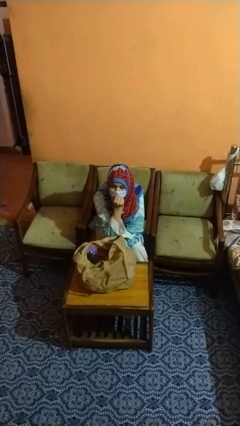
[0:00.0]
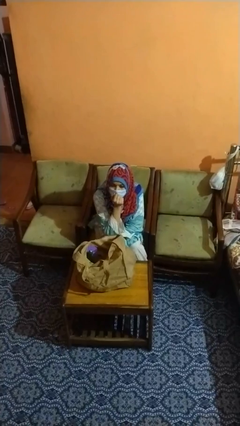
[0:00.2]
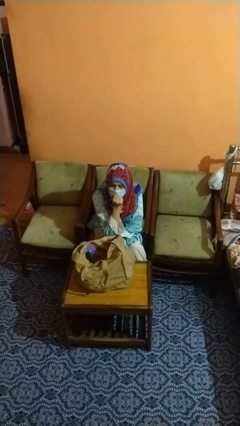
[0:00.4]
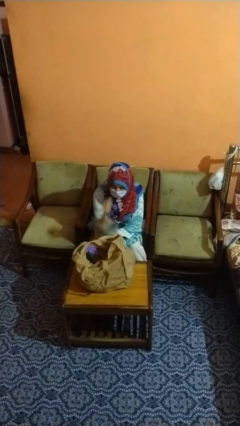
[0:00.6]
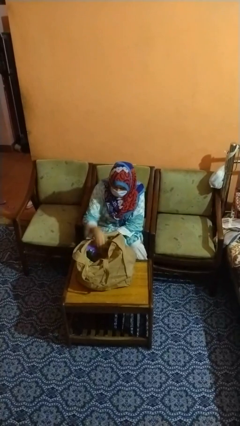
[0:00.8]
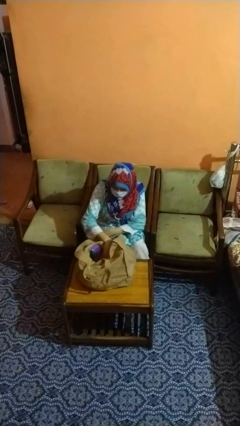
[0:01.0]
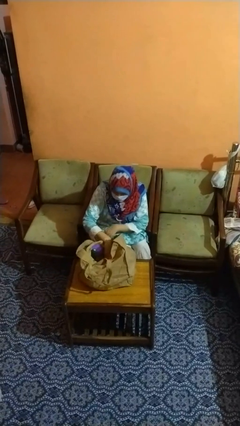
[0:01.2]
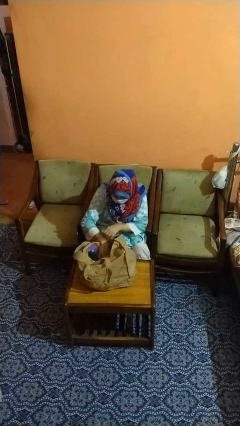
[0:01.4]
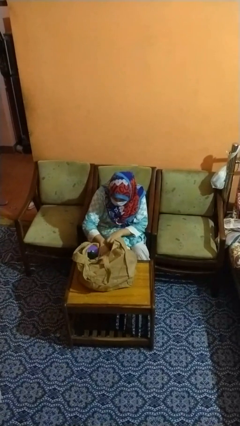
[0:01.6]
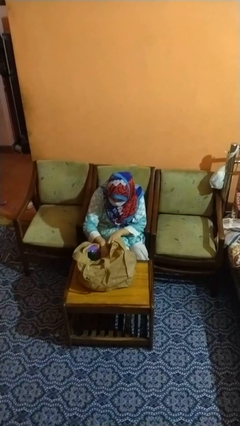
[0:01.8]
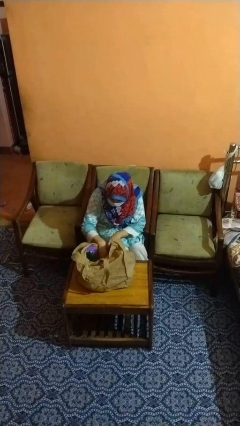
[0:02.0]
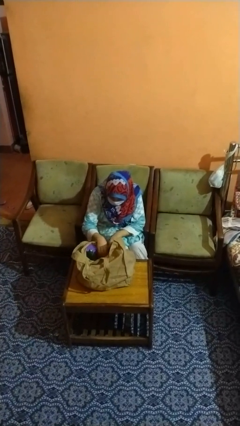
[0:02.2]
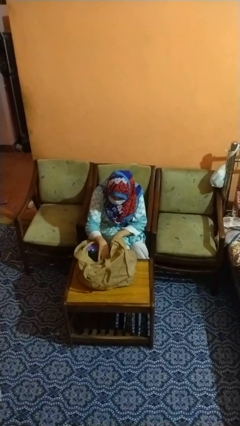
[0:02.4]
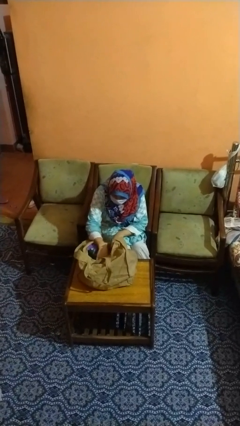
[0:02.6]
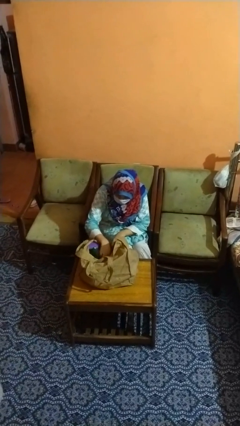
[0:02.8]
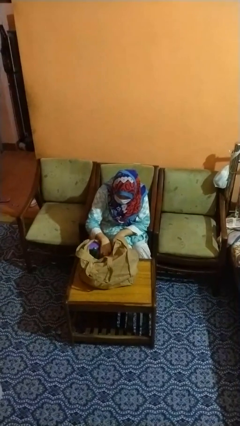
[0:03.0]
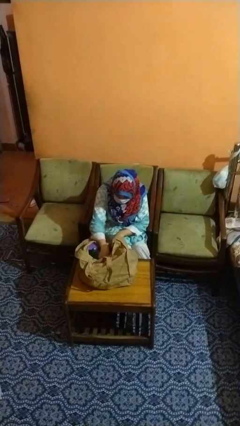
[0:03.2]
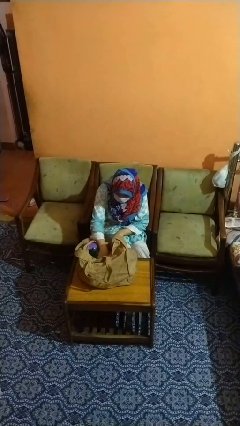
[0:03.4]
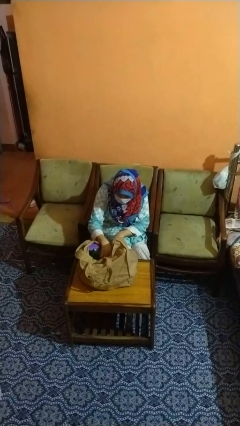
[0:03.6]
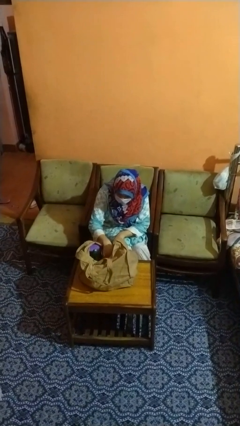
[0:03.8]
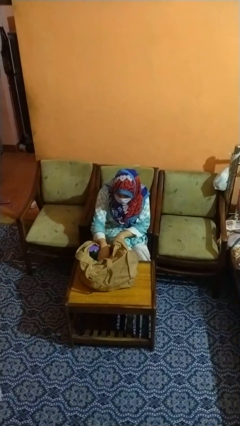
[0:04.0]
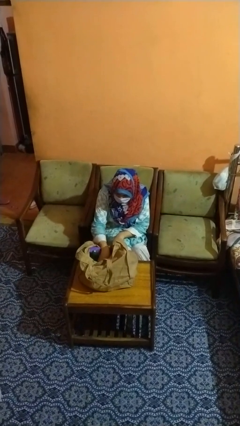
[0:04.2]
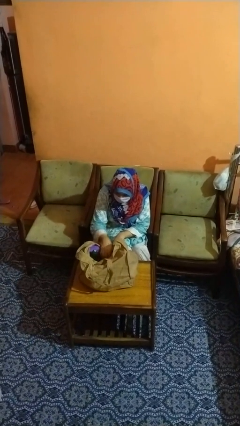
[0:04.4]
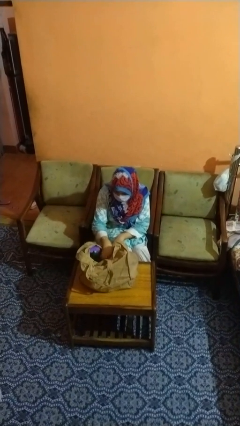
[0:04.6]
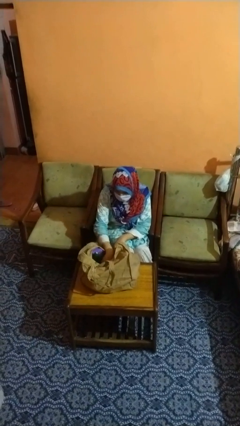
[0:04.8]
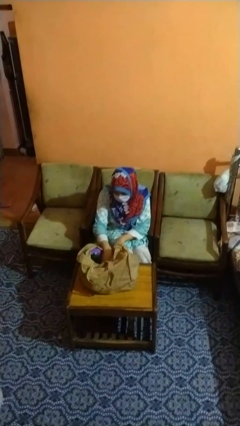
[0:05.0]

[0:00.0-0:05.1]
person searches in bag

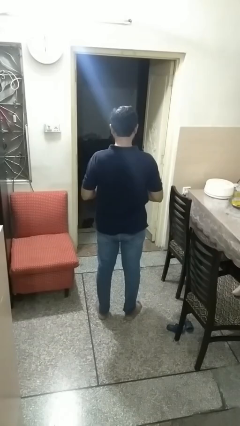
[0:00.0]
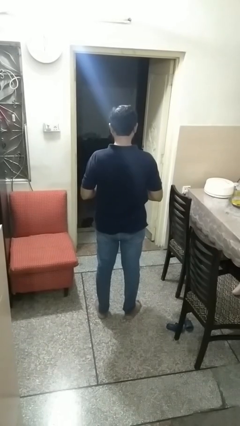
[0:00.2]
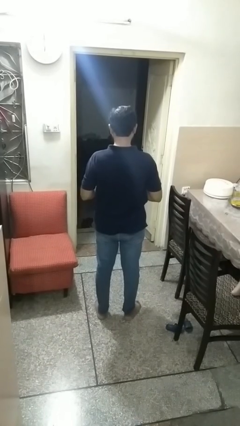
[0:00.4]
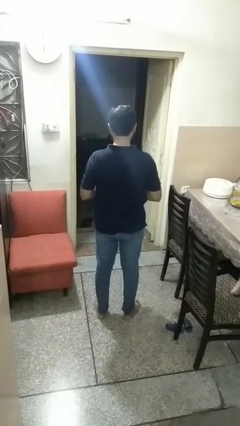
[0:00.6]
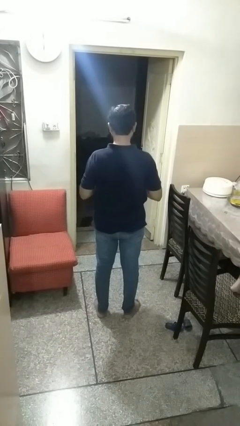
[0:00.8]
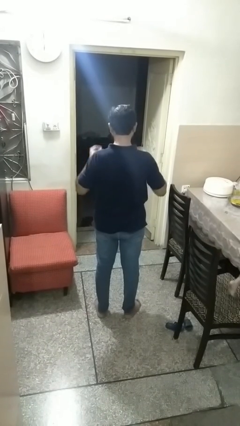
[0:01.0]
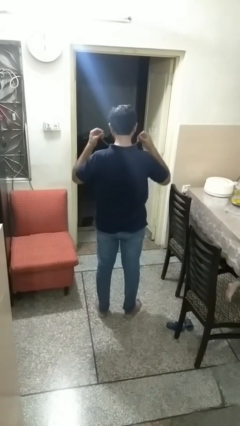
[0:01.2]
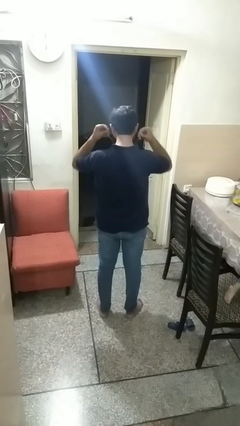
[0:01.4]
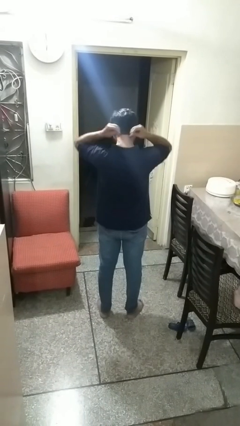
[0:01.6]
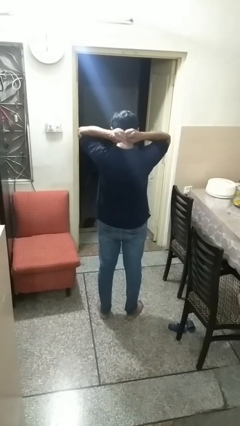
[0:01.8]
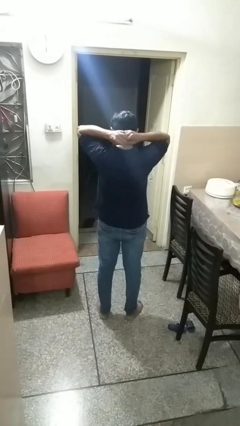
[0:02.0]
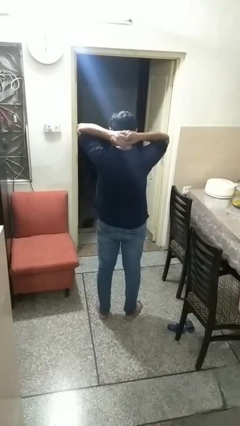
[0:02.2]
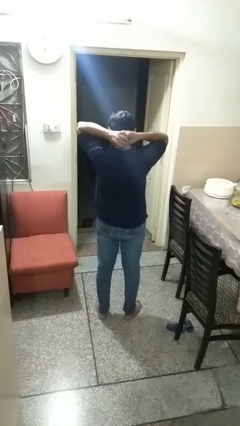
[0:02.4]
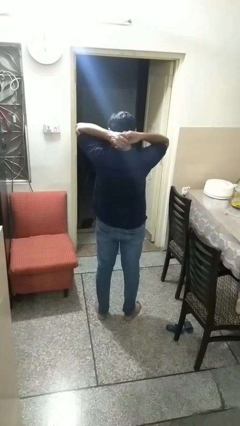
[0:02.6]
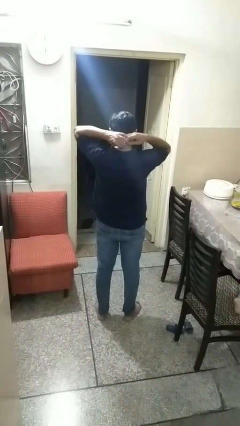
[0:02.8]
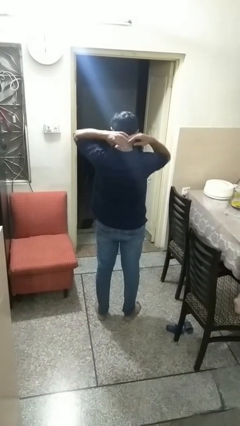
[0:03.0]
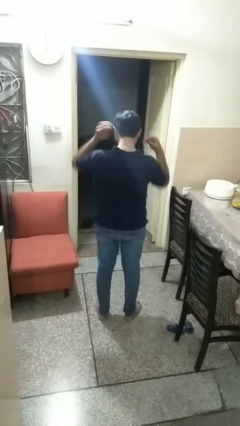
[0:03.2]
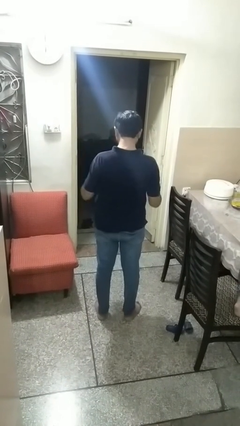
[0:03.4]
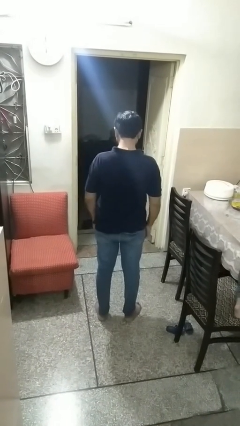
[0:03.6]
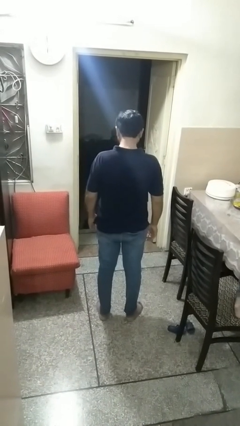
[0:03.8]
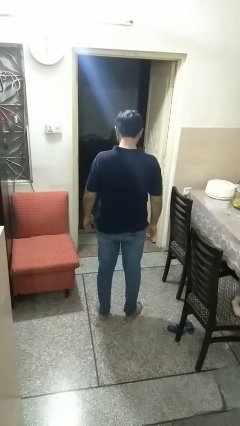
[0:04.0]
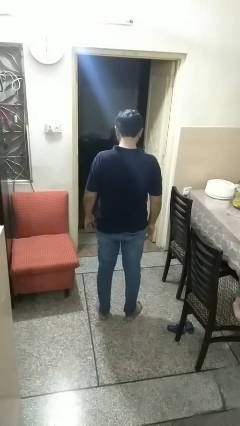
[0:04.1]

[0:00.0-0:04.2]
person puts on necklace

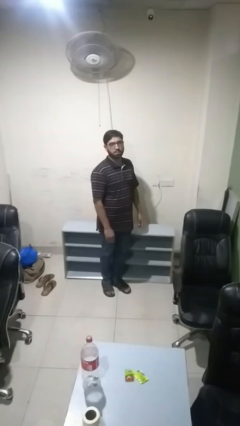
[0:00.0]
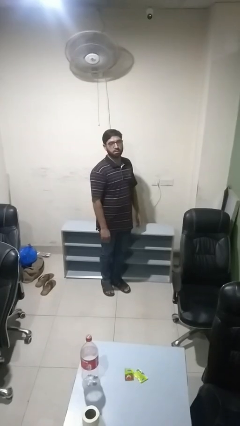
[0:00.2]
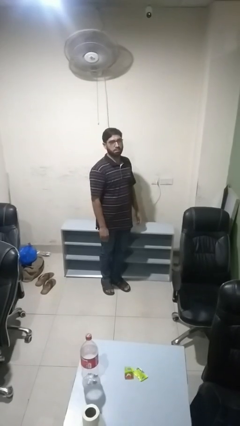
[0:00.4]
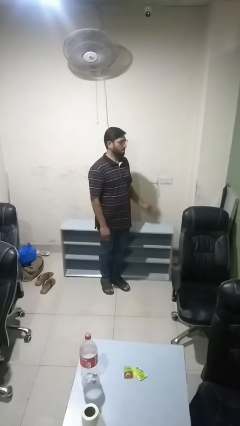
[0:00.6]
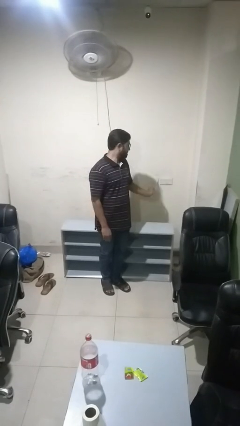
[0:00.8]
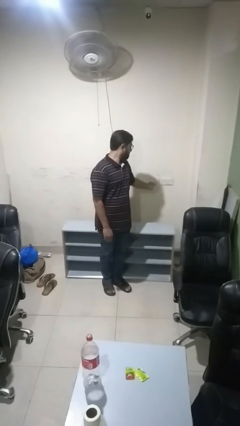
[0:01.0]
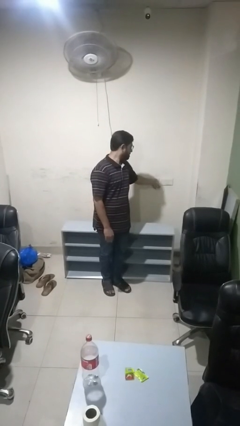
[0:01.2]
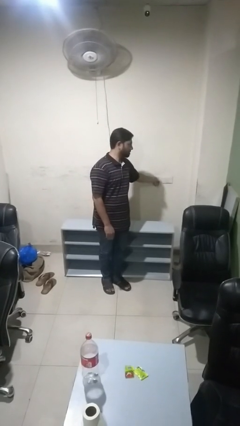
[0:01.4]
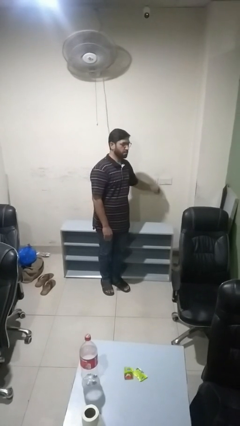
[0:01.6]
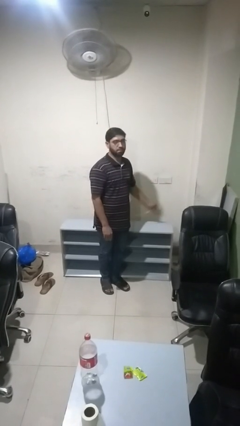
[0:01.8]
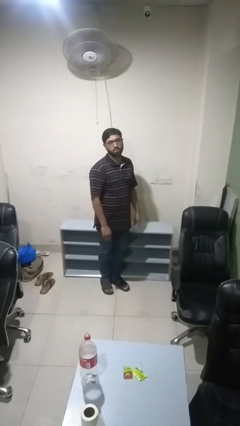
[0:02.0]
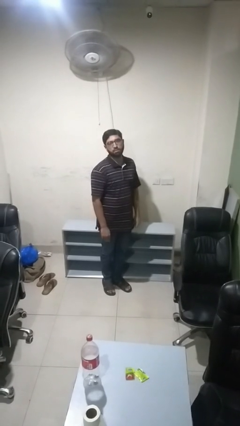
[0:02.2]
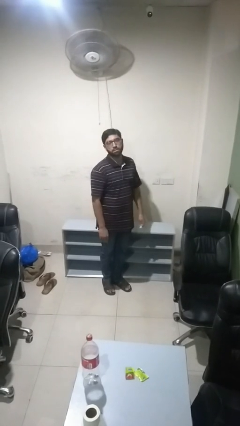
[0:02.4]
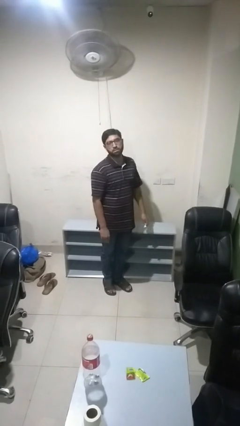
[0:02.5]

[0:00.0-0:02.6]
person unplugs from electrical socket

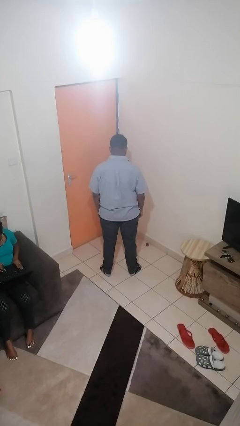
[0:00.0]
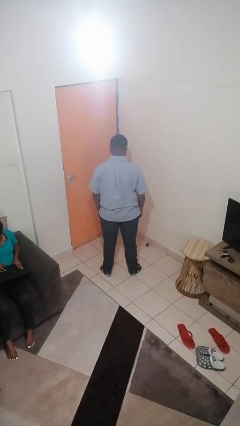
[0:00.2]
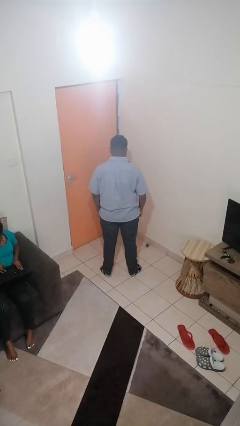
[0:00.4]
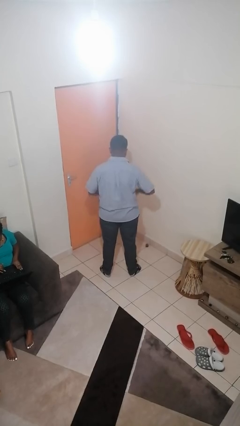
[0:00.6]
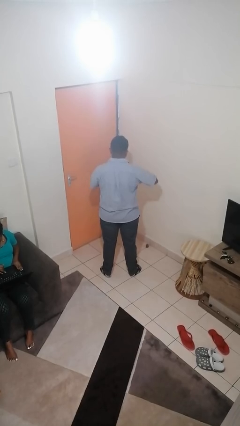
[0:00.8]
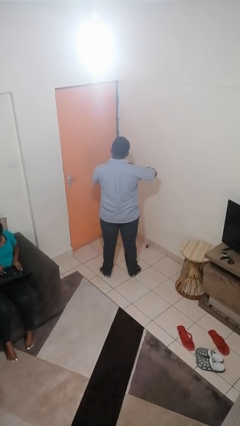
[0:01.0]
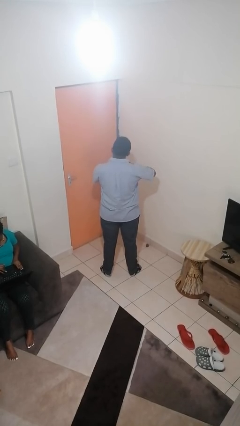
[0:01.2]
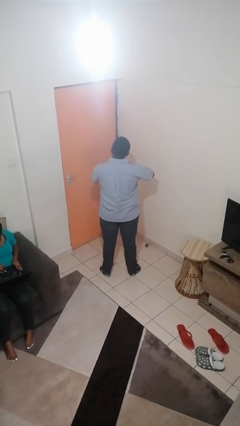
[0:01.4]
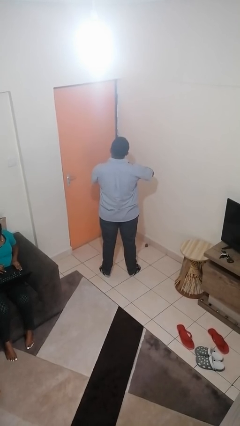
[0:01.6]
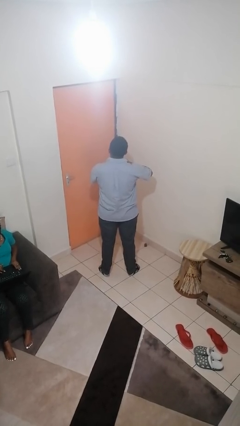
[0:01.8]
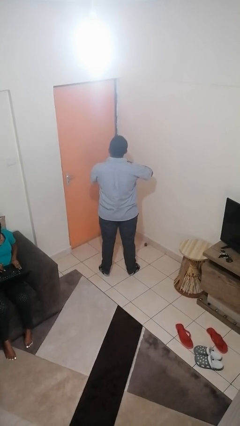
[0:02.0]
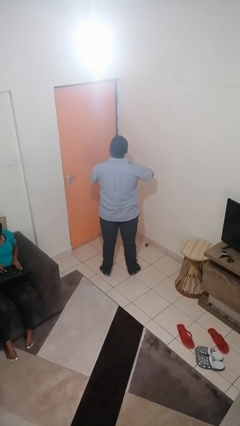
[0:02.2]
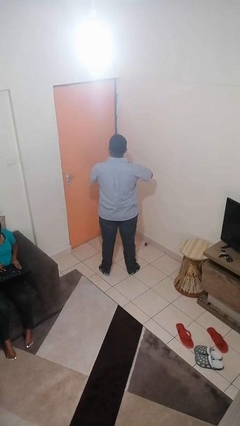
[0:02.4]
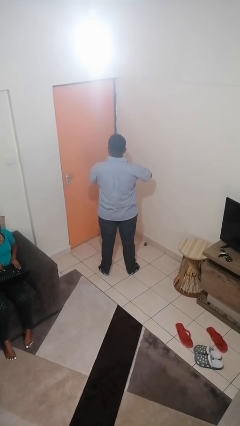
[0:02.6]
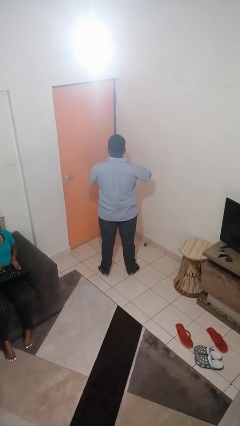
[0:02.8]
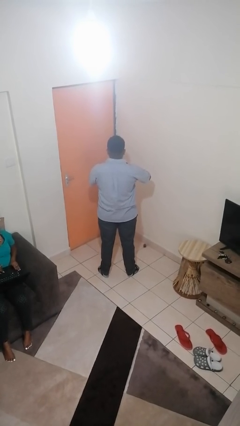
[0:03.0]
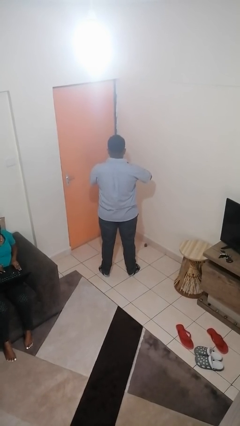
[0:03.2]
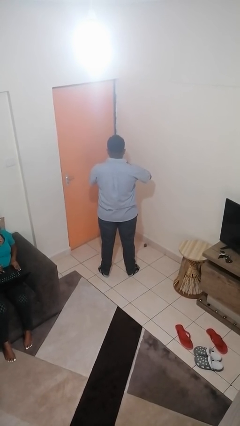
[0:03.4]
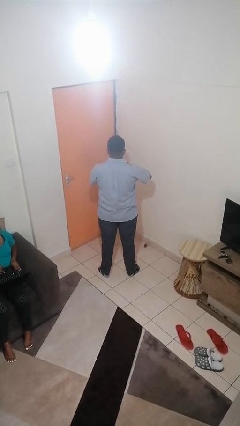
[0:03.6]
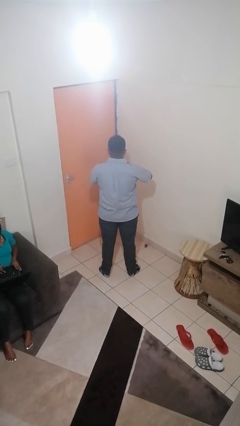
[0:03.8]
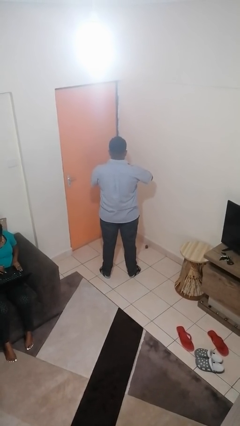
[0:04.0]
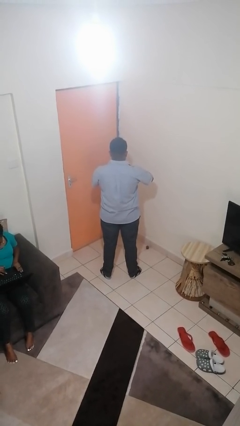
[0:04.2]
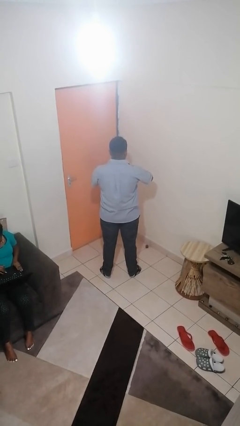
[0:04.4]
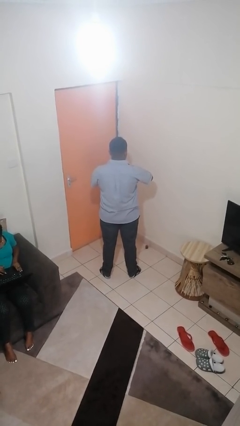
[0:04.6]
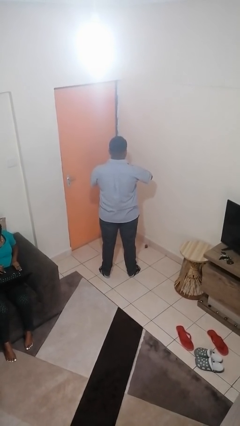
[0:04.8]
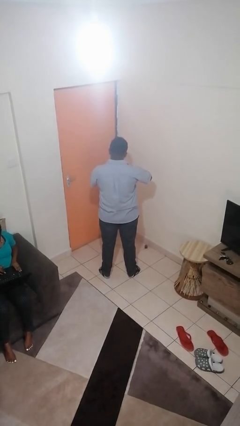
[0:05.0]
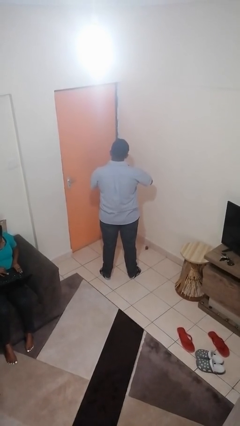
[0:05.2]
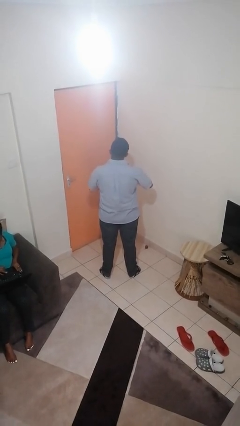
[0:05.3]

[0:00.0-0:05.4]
person cracks knuckles

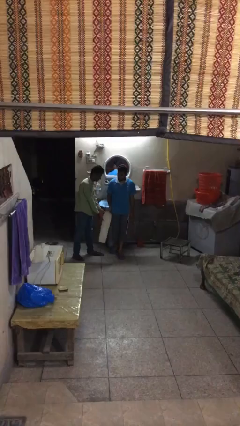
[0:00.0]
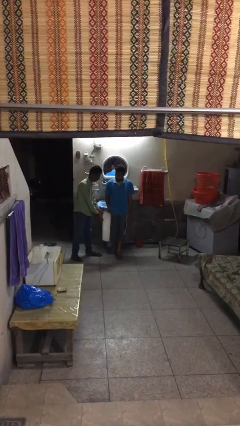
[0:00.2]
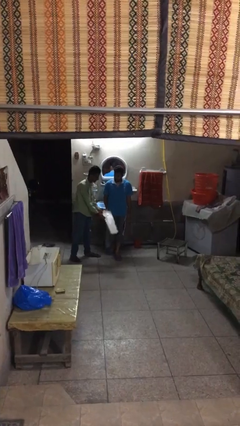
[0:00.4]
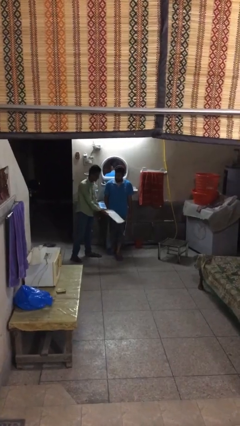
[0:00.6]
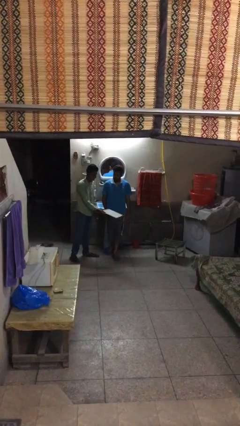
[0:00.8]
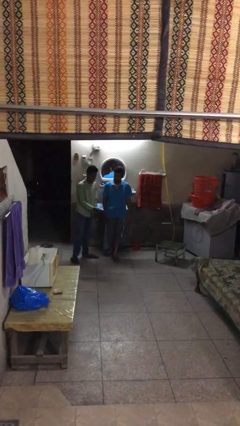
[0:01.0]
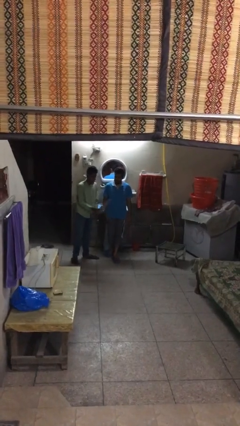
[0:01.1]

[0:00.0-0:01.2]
person transfers object to person
